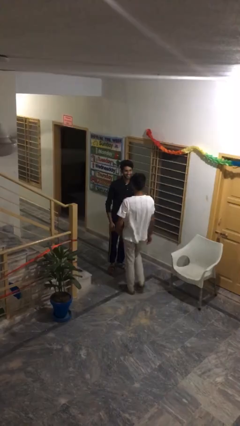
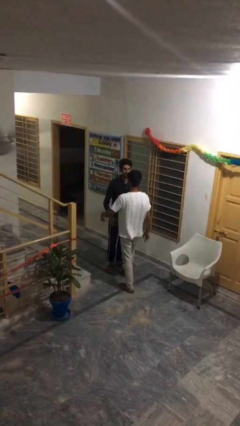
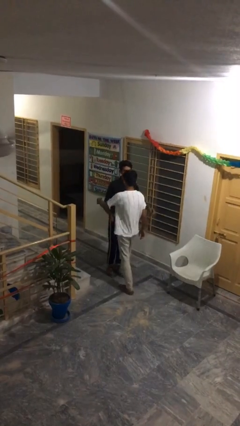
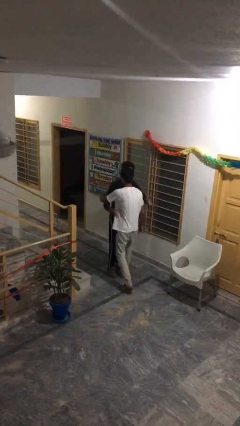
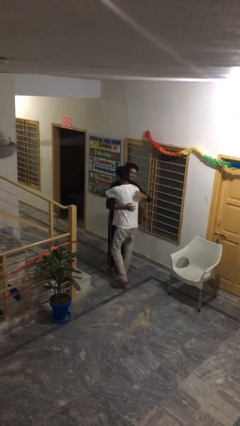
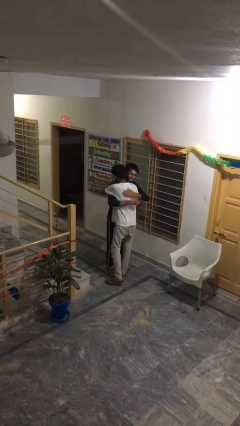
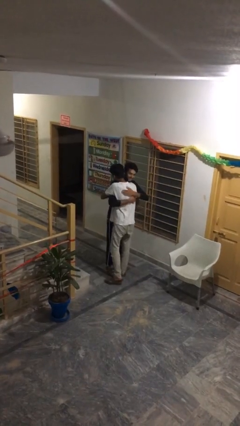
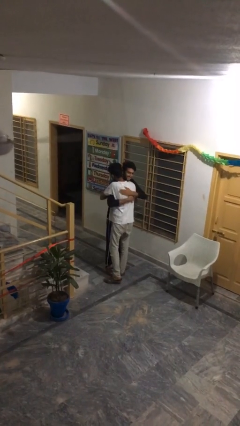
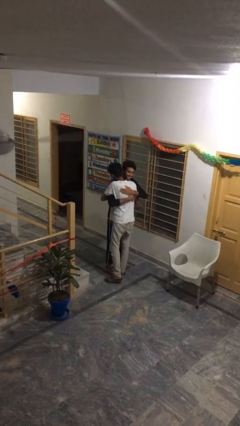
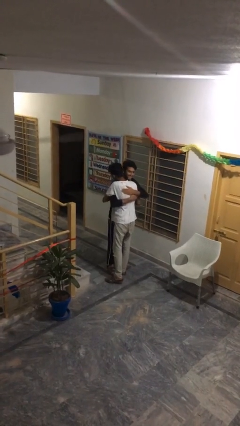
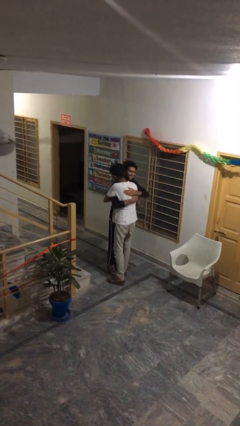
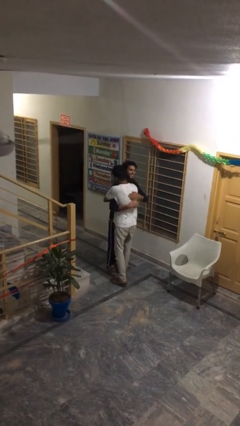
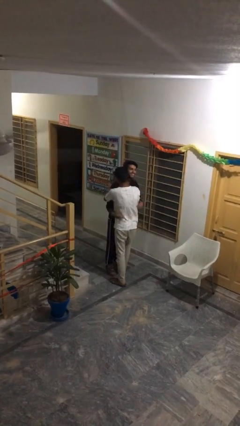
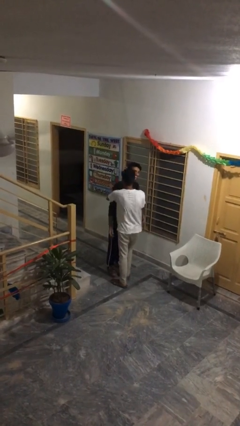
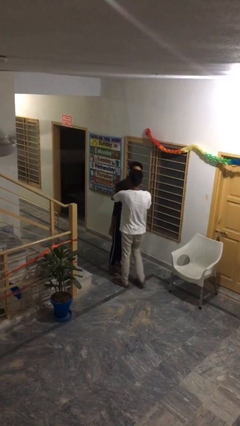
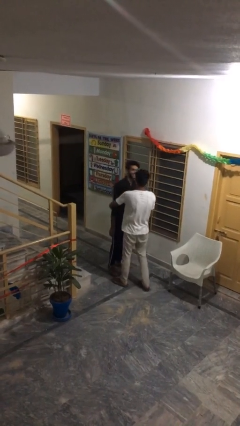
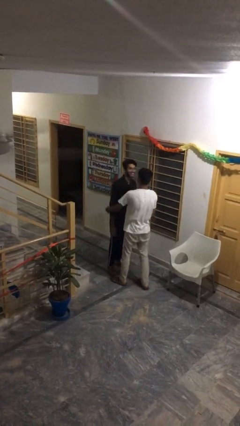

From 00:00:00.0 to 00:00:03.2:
person embraces person

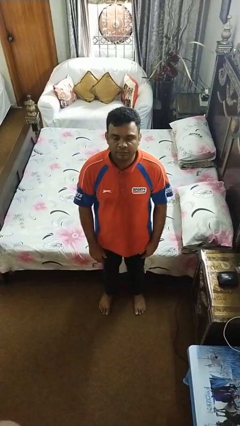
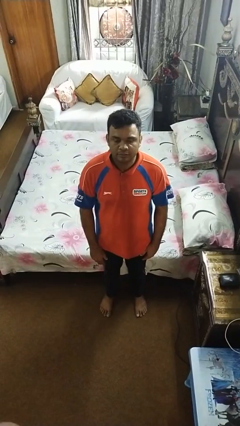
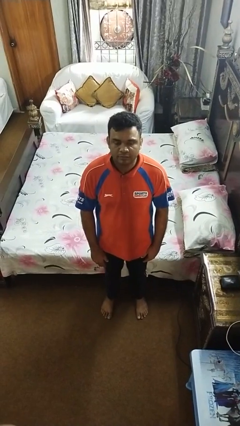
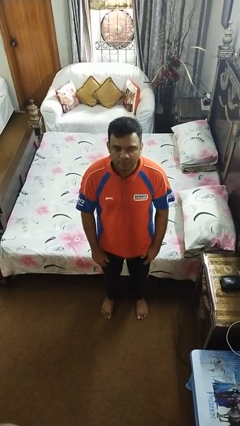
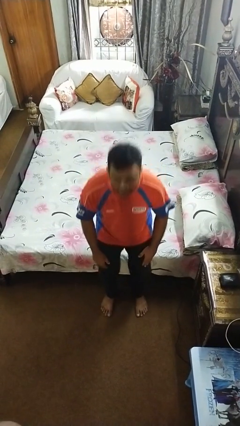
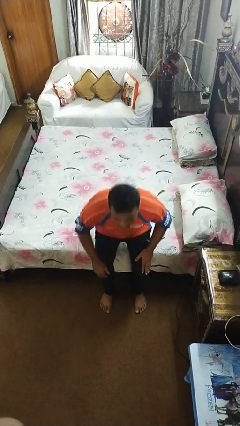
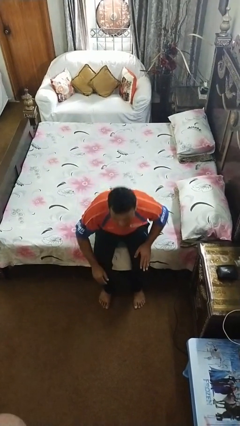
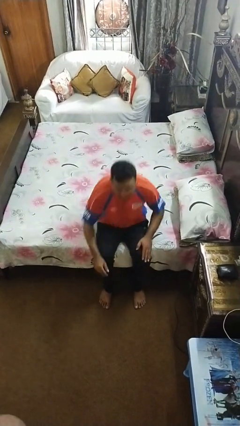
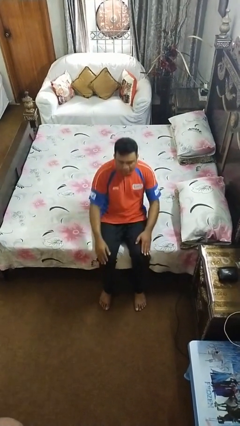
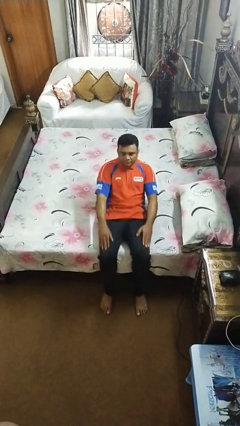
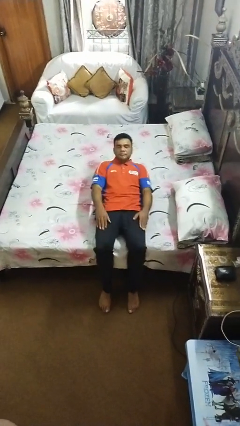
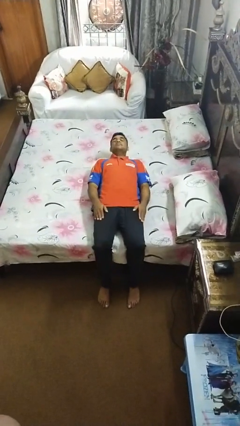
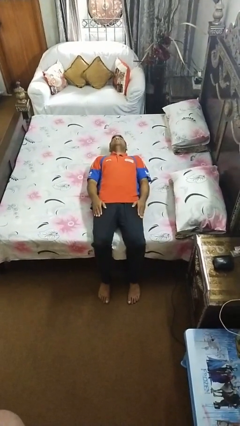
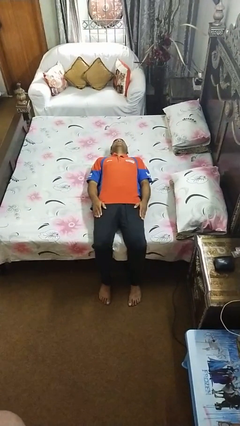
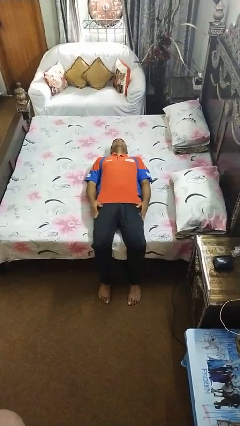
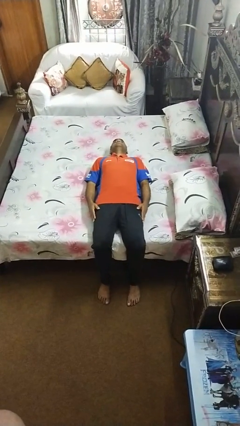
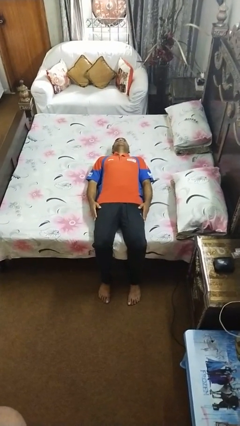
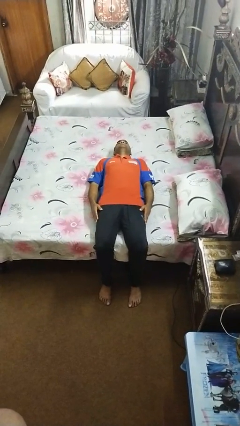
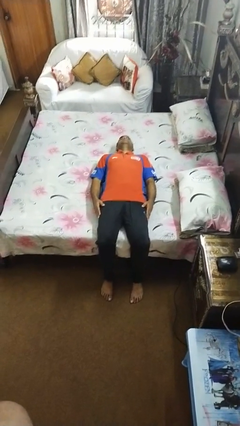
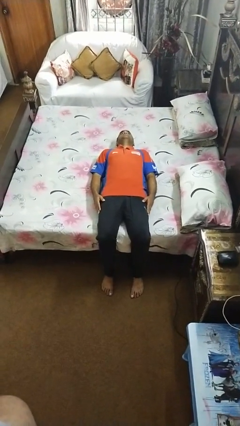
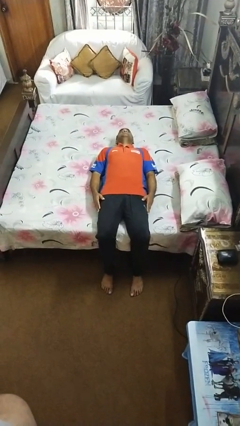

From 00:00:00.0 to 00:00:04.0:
person lies down on bed

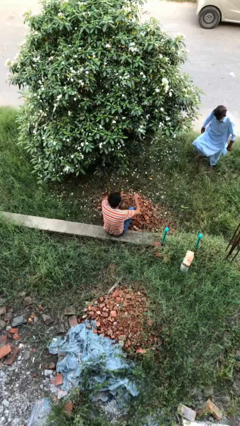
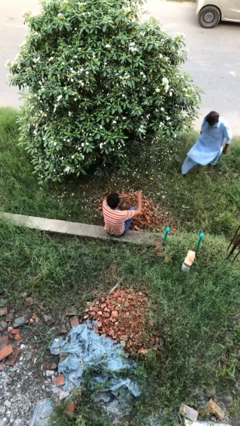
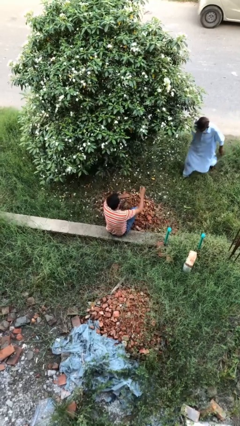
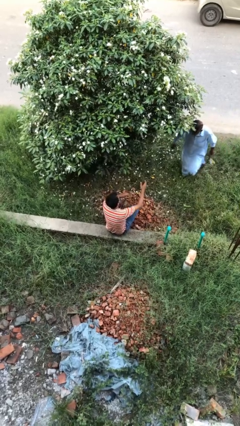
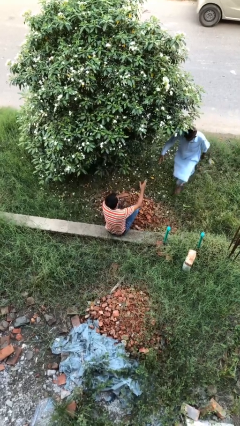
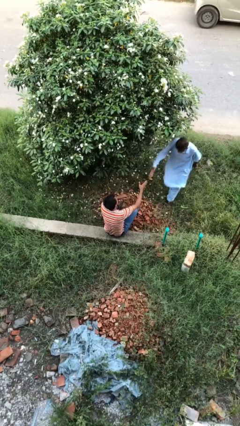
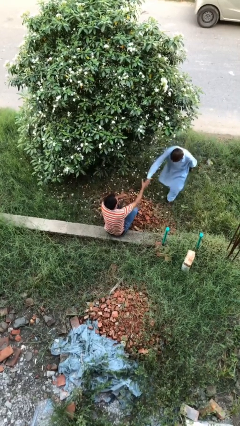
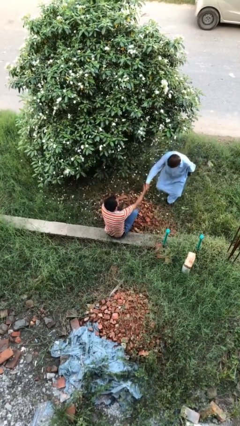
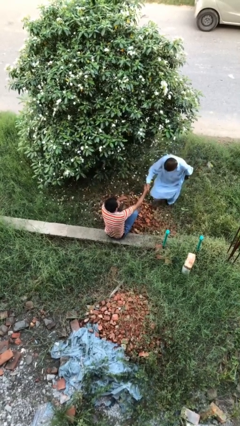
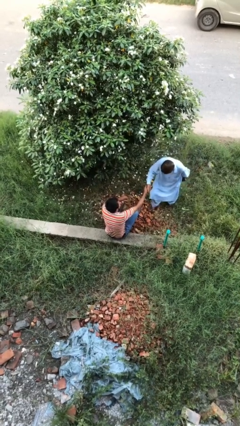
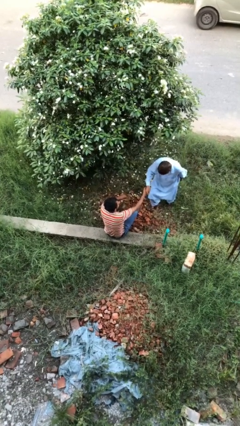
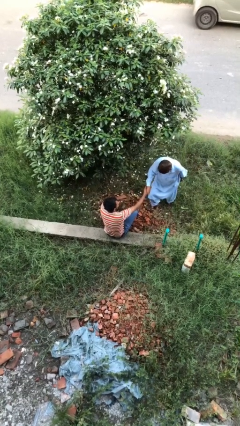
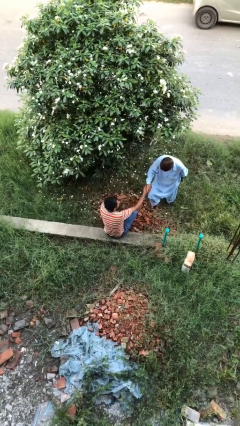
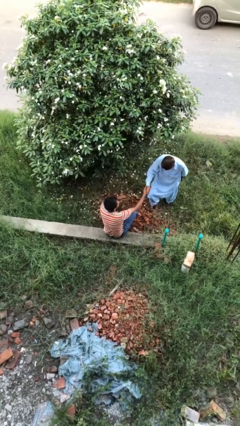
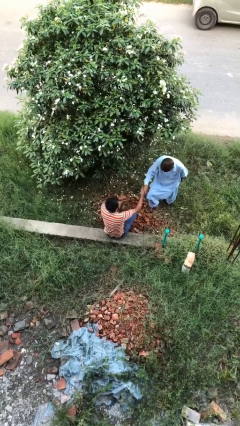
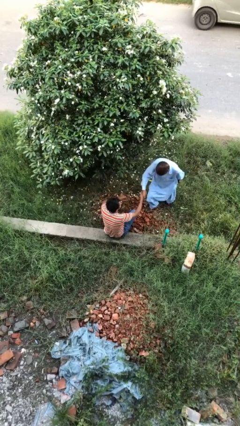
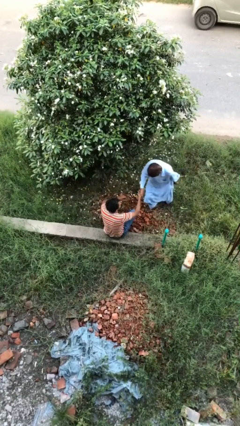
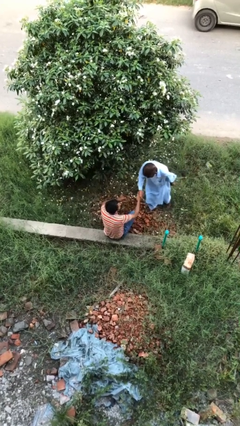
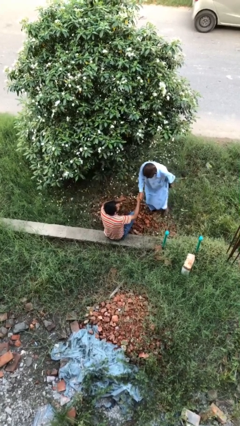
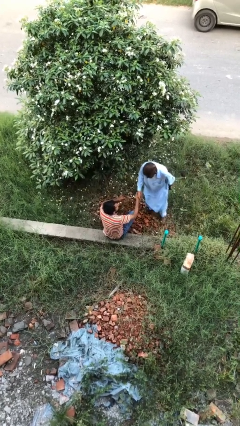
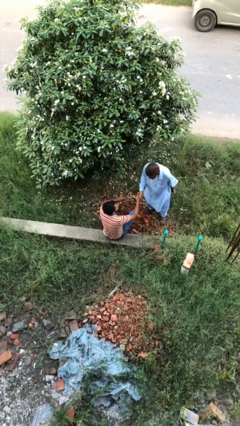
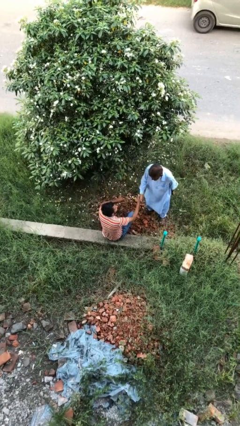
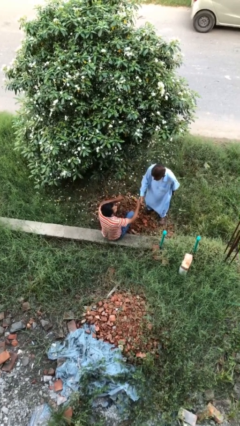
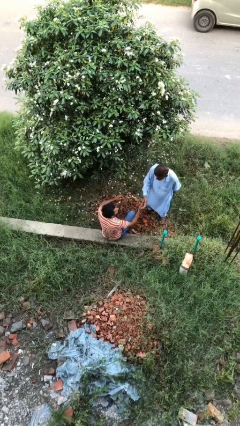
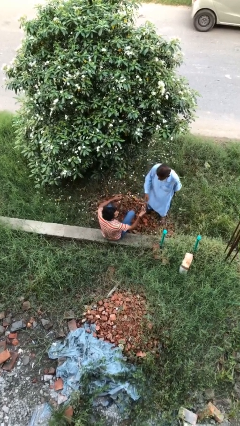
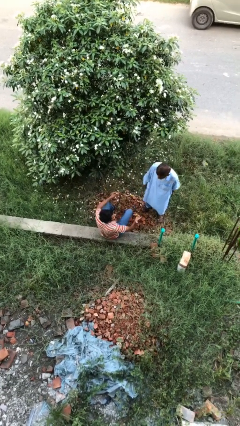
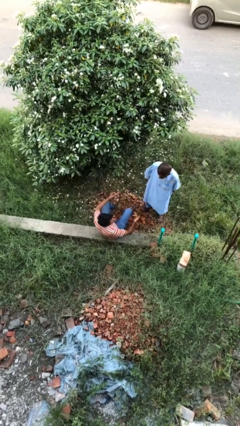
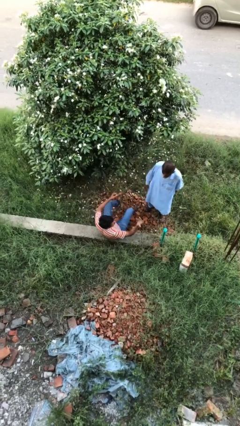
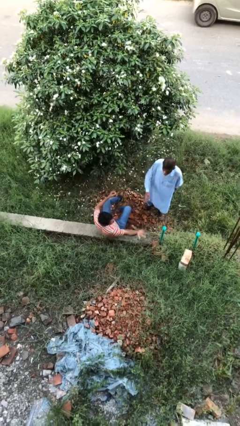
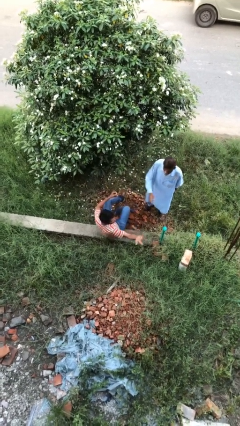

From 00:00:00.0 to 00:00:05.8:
person shakes hand

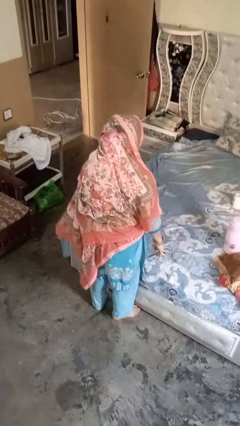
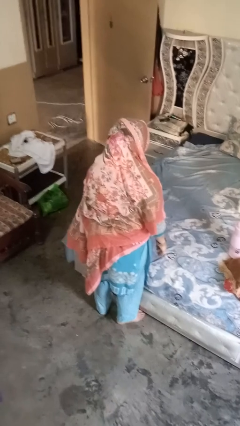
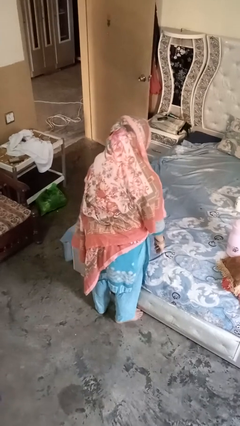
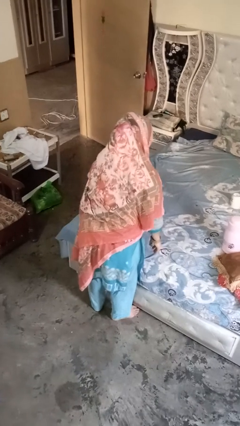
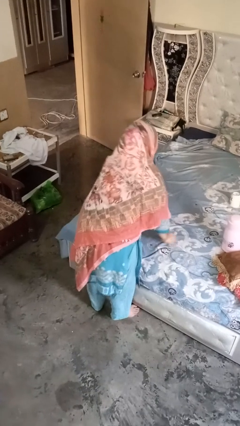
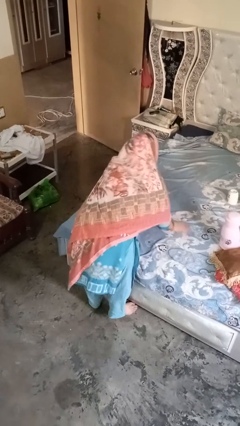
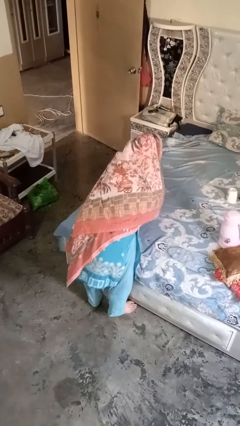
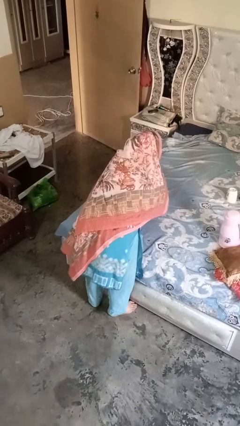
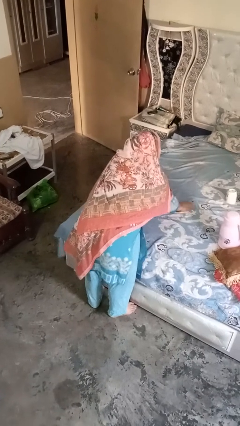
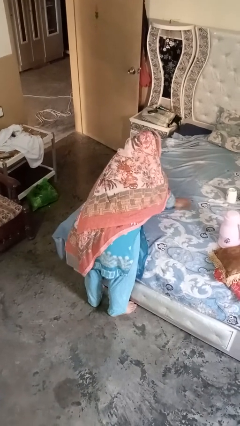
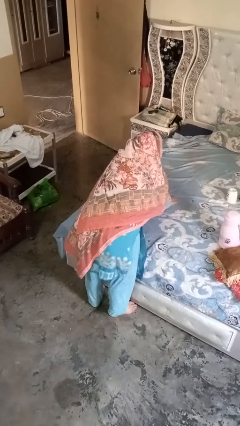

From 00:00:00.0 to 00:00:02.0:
person searches under bed

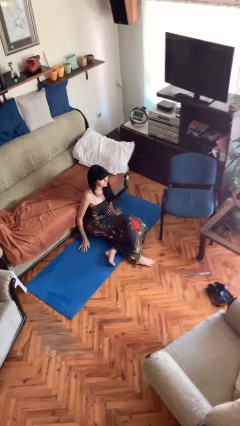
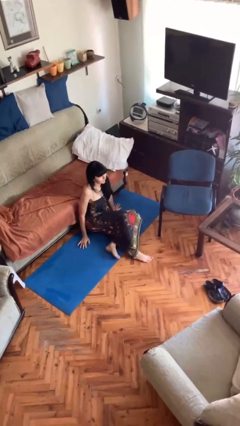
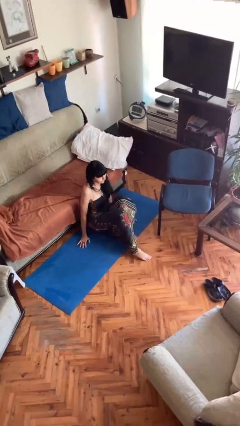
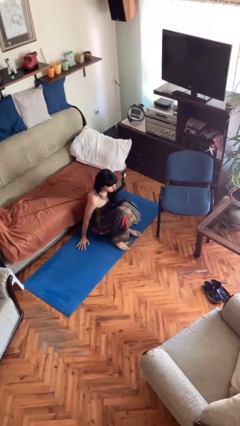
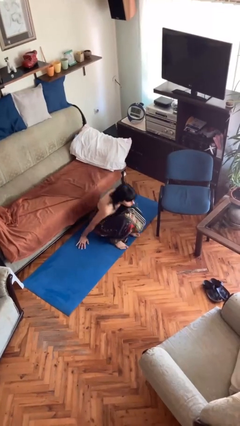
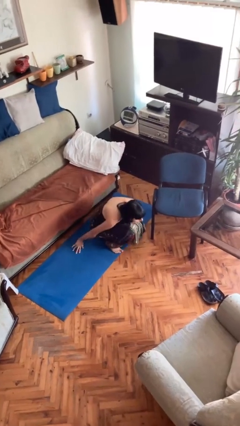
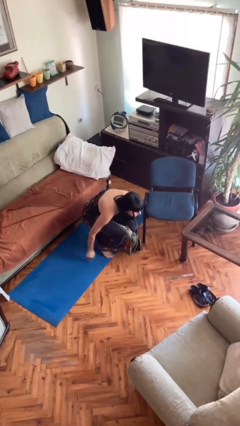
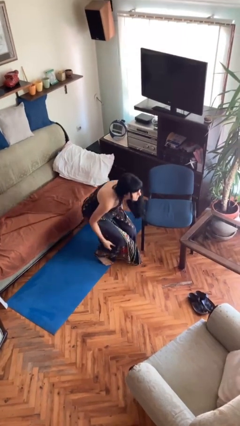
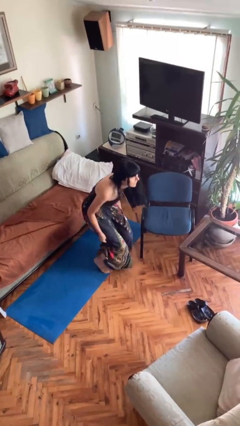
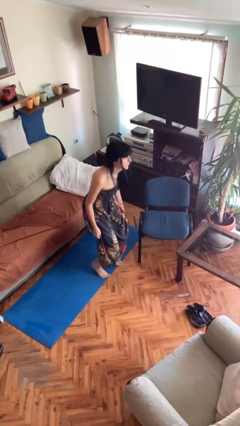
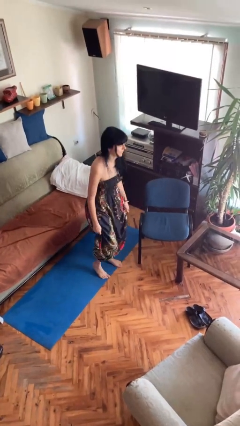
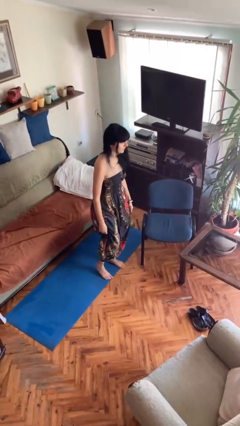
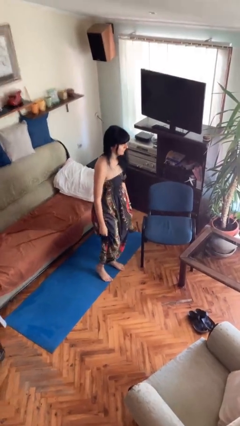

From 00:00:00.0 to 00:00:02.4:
person stands up from floor
